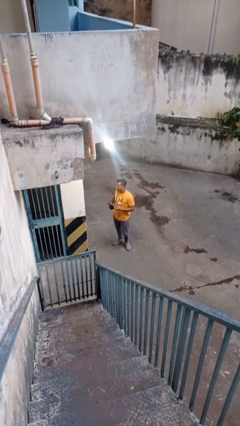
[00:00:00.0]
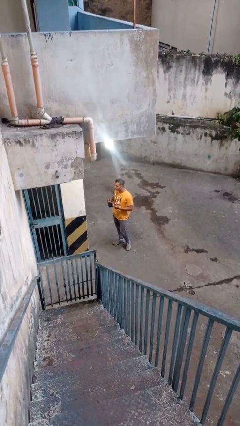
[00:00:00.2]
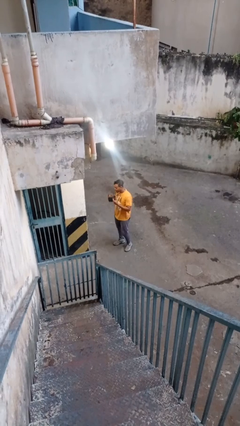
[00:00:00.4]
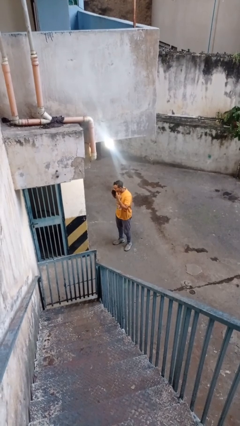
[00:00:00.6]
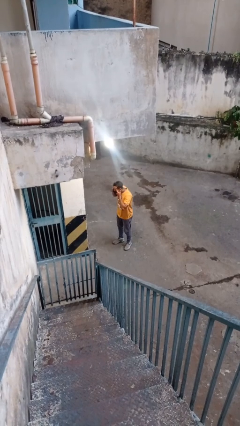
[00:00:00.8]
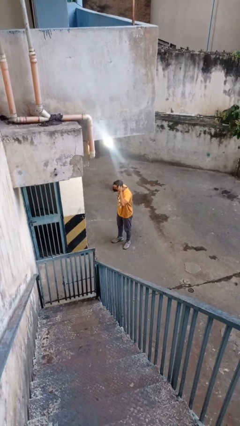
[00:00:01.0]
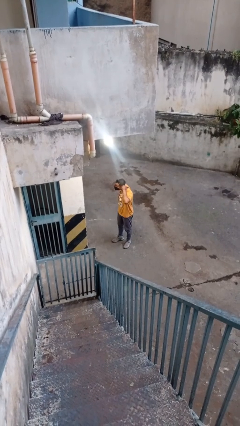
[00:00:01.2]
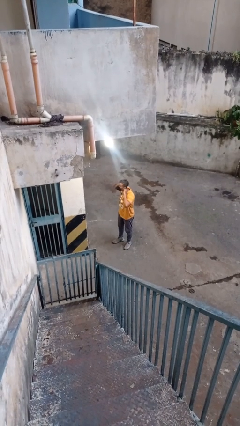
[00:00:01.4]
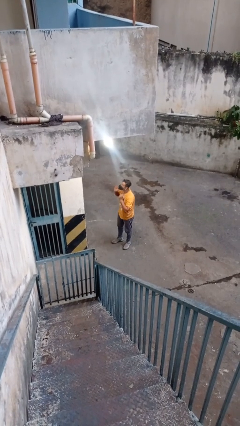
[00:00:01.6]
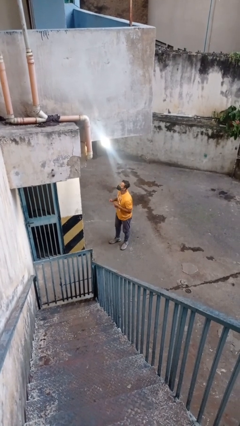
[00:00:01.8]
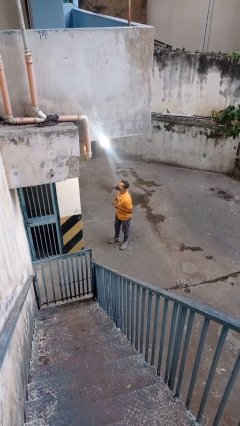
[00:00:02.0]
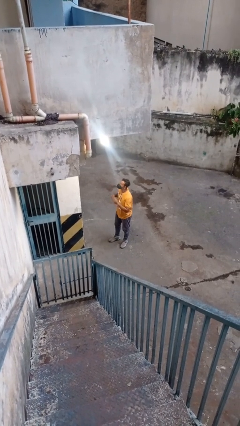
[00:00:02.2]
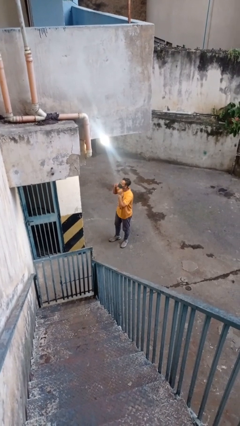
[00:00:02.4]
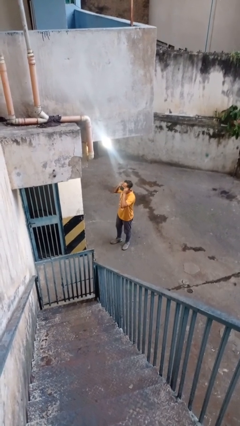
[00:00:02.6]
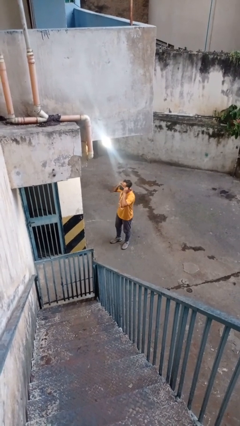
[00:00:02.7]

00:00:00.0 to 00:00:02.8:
person puts on facemask

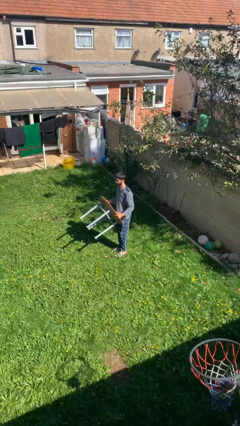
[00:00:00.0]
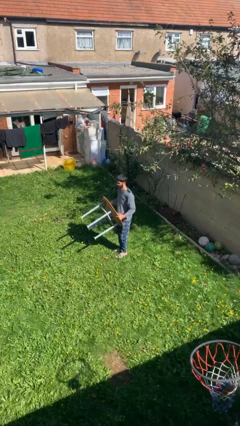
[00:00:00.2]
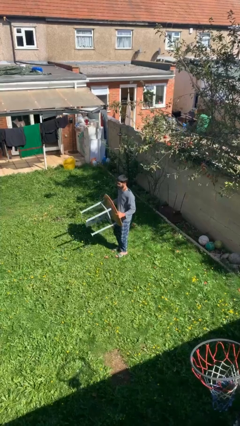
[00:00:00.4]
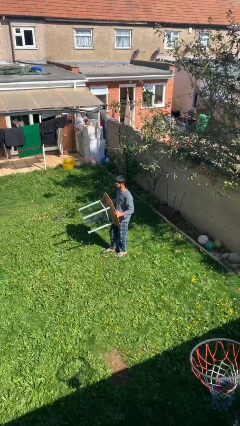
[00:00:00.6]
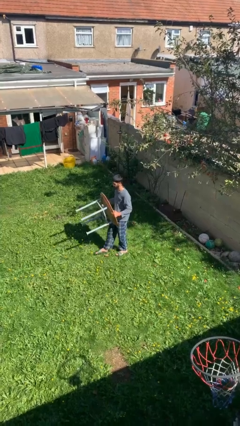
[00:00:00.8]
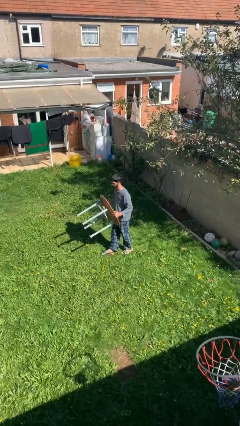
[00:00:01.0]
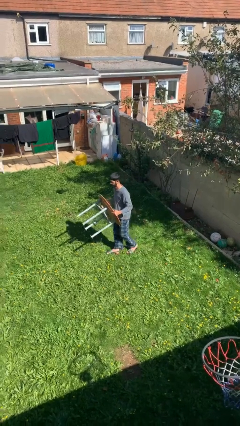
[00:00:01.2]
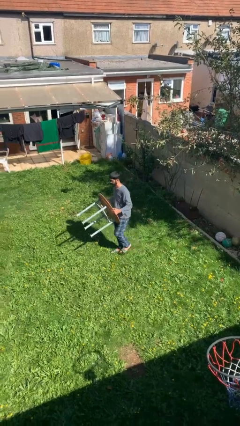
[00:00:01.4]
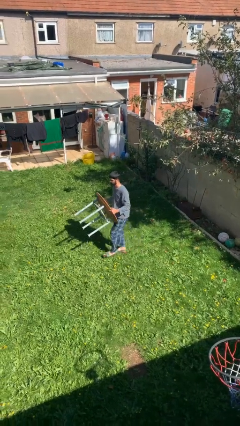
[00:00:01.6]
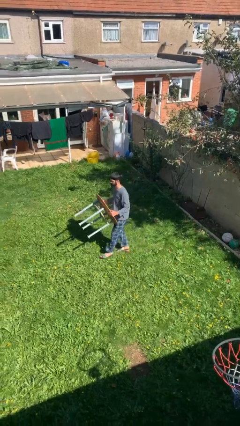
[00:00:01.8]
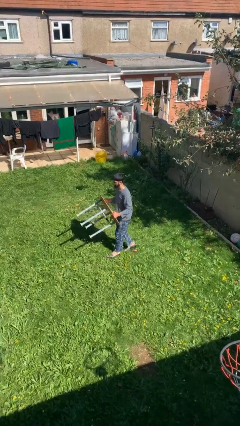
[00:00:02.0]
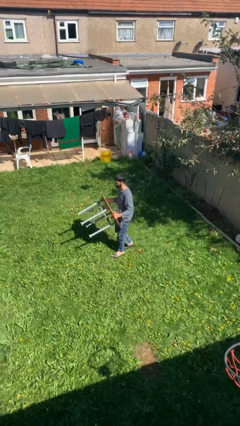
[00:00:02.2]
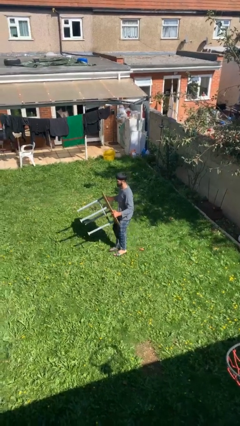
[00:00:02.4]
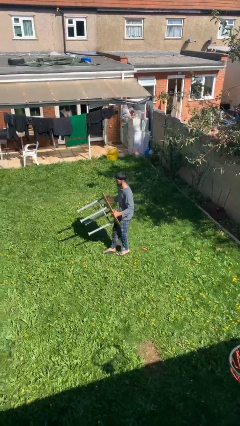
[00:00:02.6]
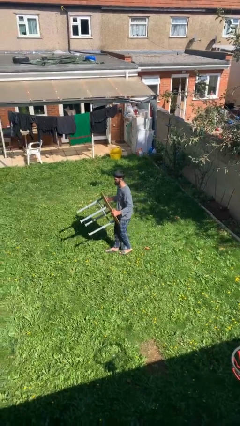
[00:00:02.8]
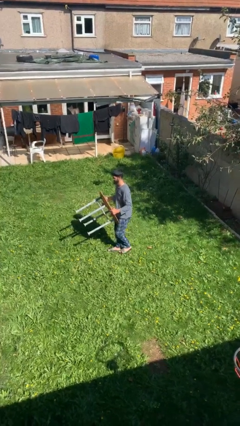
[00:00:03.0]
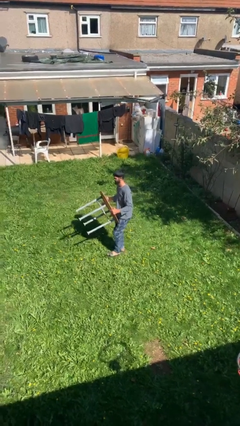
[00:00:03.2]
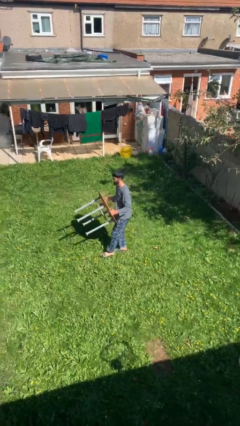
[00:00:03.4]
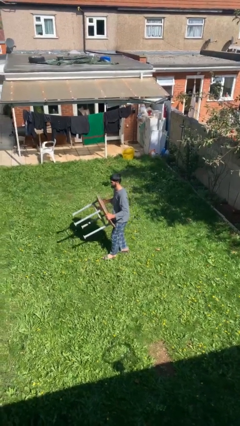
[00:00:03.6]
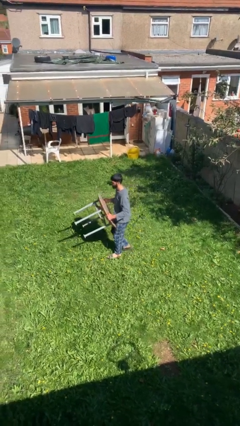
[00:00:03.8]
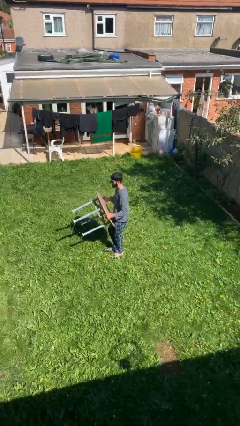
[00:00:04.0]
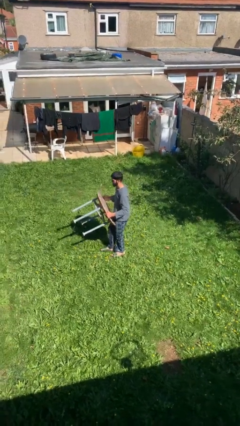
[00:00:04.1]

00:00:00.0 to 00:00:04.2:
person carries heavy object

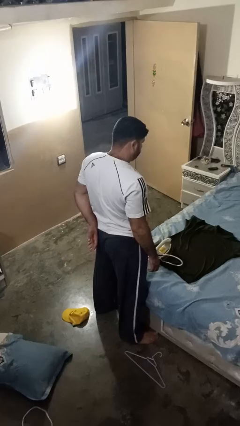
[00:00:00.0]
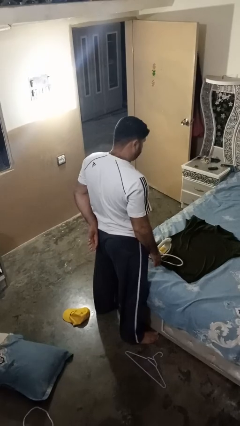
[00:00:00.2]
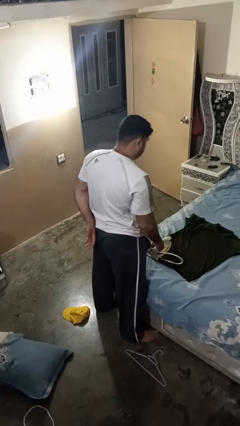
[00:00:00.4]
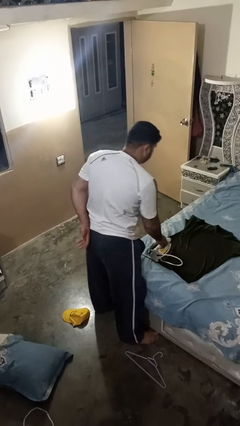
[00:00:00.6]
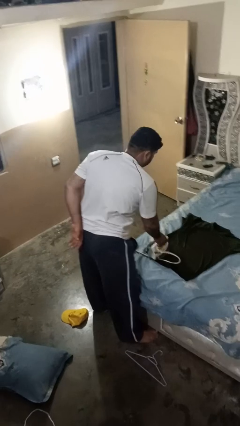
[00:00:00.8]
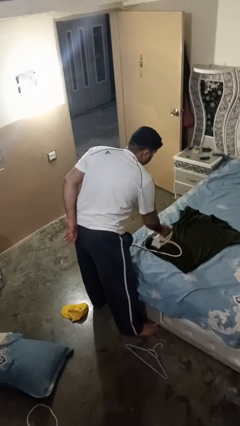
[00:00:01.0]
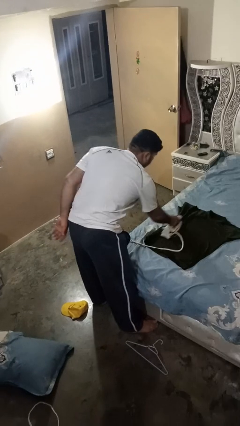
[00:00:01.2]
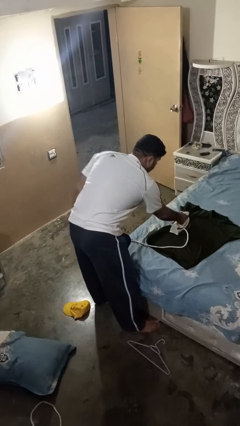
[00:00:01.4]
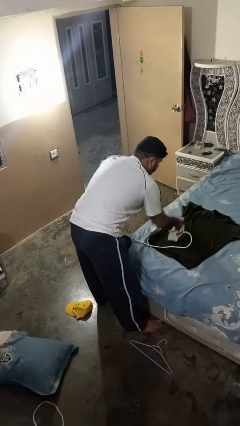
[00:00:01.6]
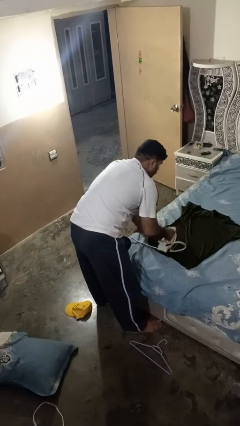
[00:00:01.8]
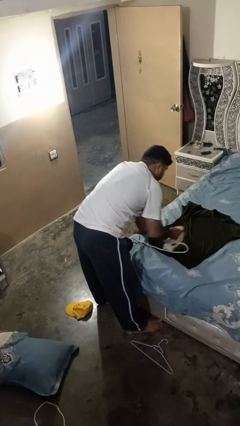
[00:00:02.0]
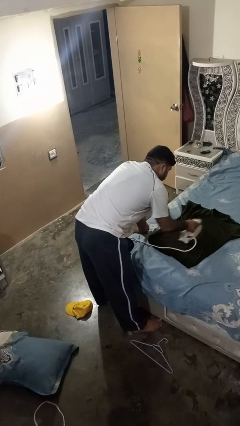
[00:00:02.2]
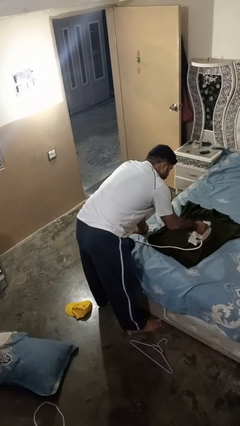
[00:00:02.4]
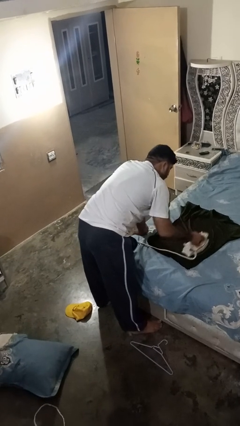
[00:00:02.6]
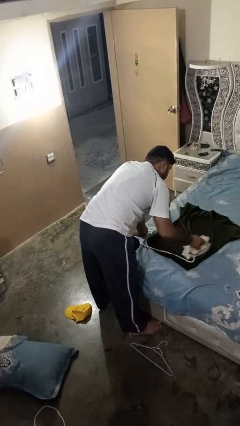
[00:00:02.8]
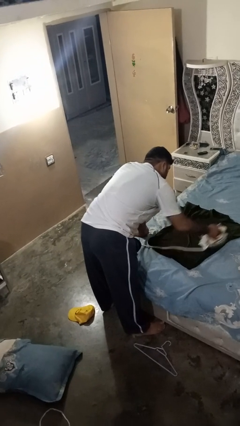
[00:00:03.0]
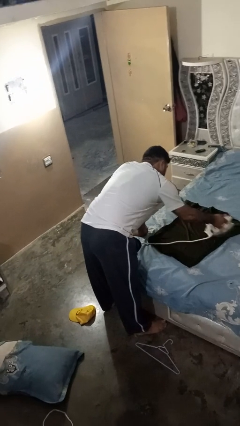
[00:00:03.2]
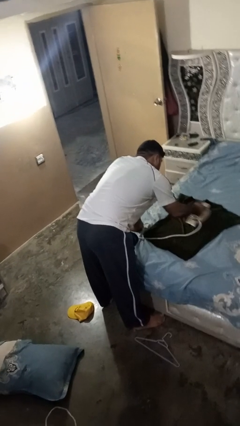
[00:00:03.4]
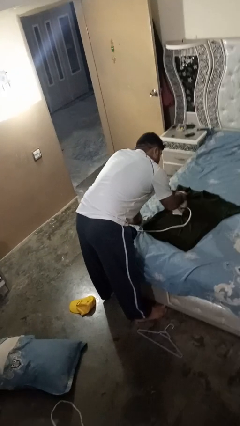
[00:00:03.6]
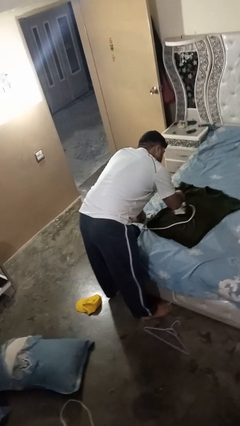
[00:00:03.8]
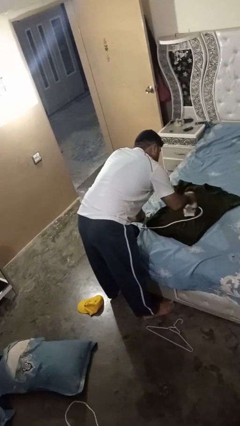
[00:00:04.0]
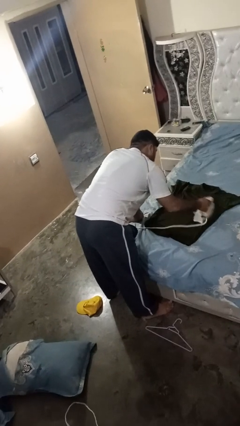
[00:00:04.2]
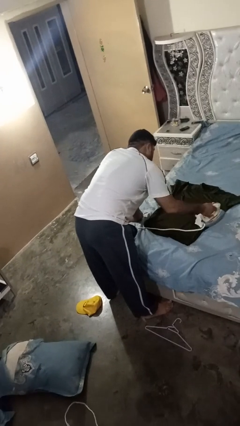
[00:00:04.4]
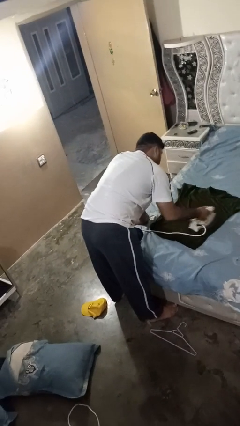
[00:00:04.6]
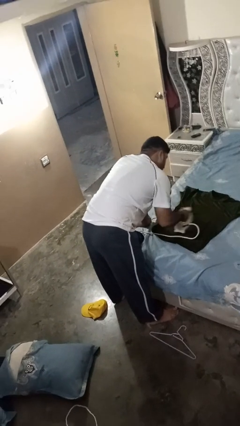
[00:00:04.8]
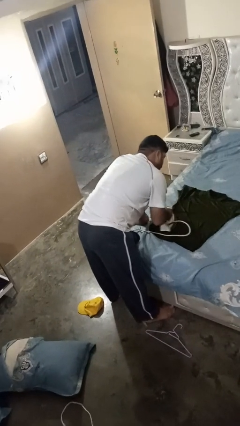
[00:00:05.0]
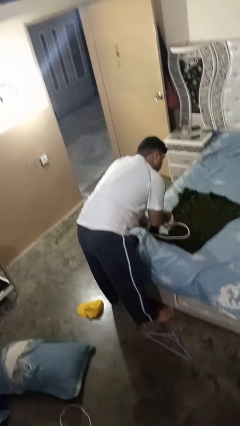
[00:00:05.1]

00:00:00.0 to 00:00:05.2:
person irons clothes

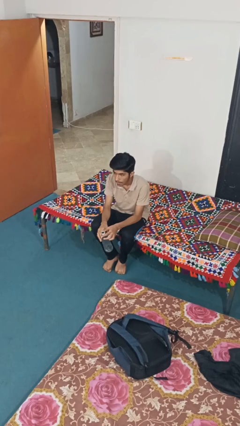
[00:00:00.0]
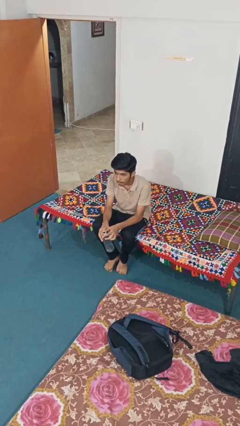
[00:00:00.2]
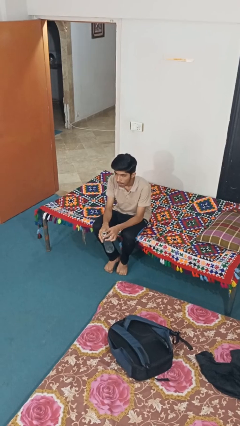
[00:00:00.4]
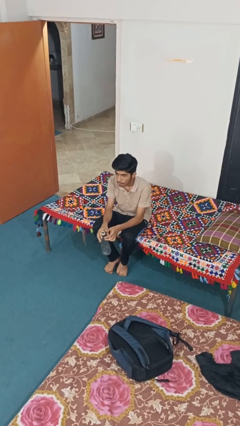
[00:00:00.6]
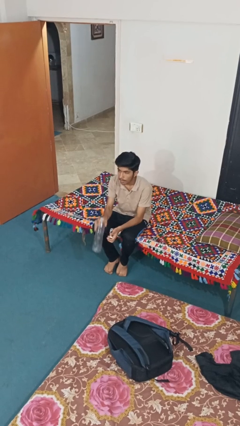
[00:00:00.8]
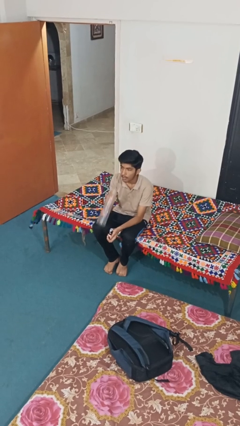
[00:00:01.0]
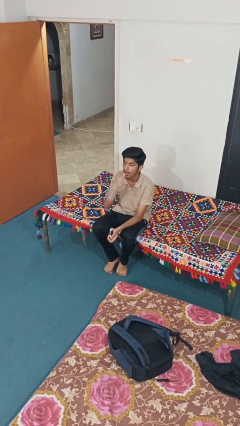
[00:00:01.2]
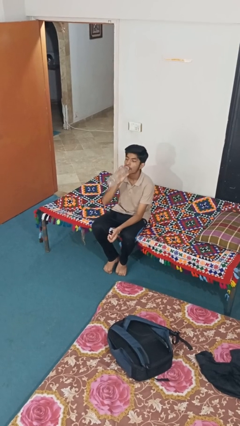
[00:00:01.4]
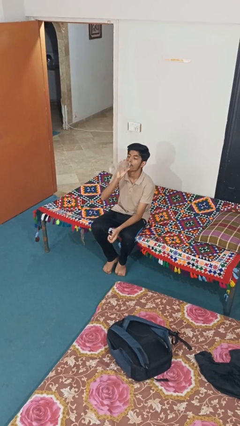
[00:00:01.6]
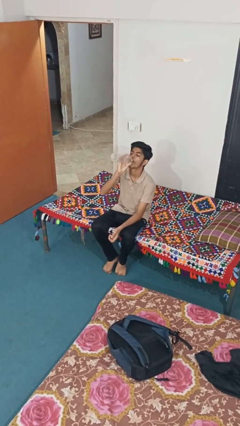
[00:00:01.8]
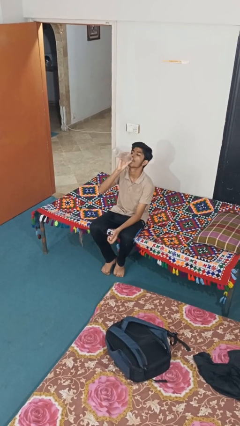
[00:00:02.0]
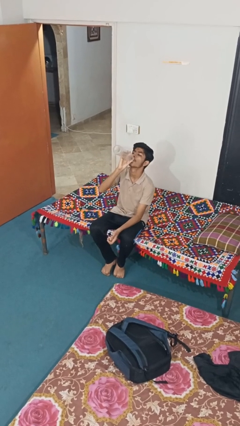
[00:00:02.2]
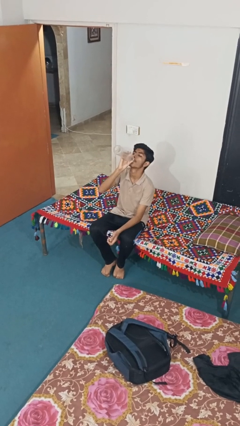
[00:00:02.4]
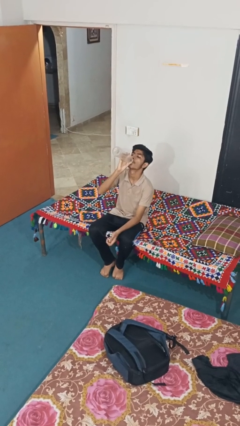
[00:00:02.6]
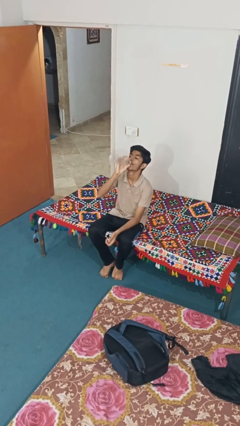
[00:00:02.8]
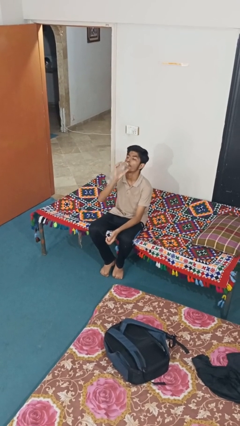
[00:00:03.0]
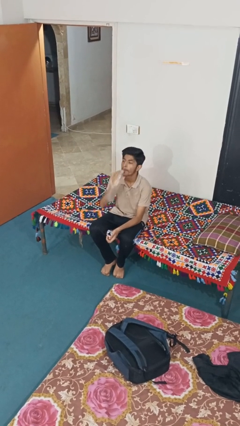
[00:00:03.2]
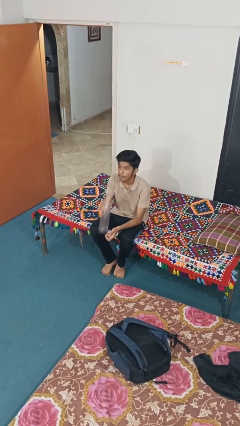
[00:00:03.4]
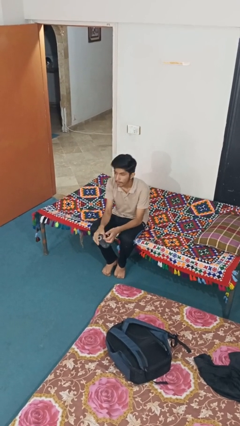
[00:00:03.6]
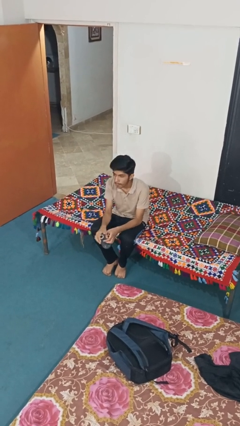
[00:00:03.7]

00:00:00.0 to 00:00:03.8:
person drinks from bottle

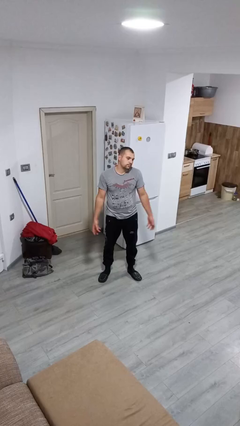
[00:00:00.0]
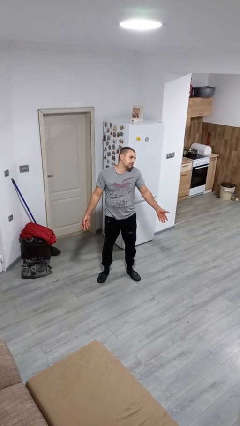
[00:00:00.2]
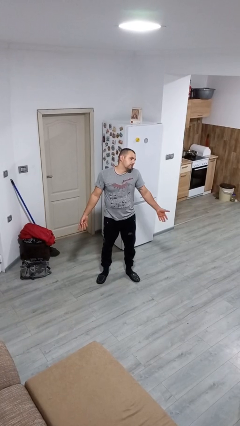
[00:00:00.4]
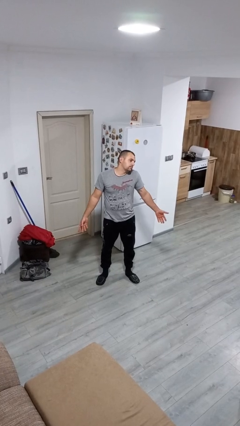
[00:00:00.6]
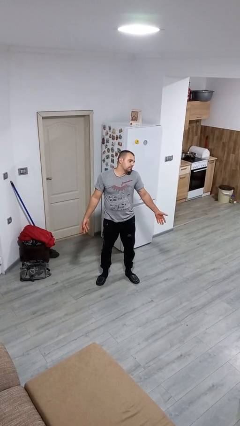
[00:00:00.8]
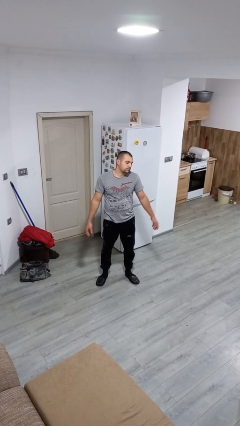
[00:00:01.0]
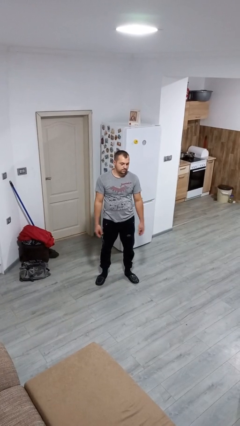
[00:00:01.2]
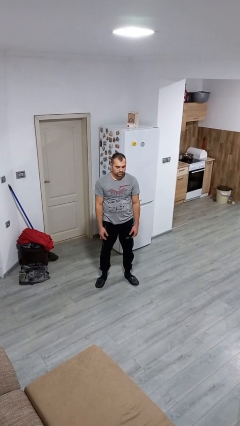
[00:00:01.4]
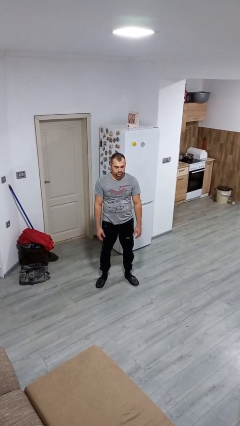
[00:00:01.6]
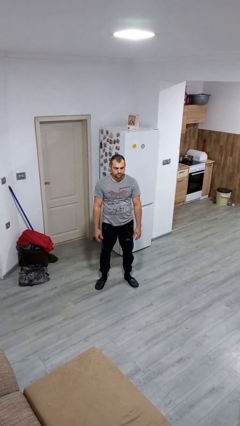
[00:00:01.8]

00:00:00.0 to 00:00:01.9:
person shrugs
